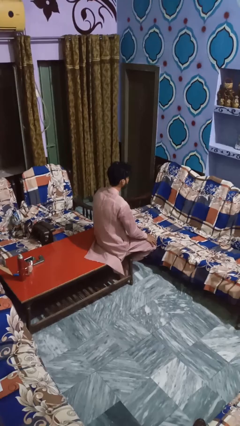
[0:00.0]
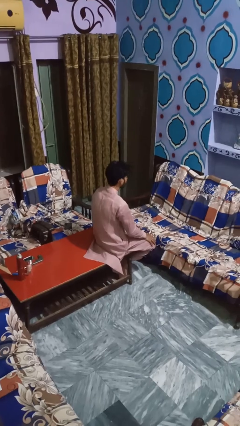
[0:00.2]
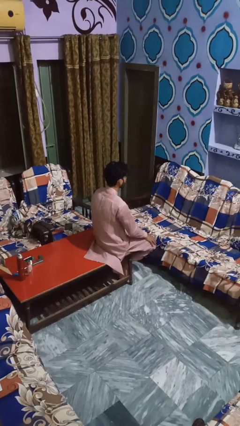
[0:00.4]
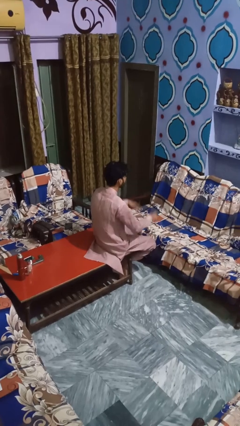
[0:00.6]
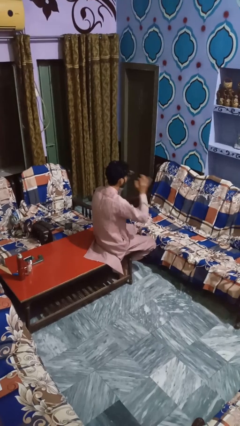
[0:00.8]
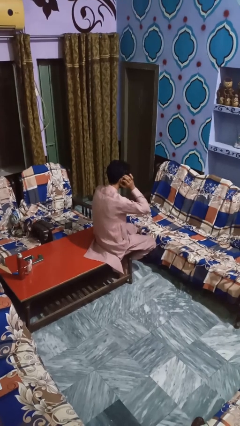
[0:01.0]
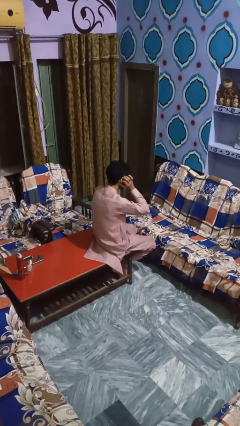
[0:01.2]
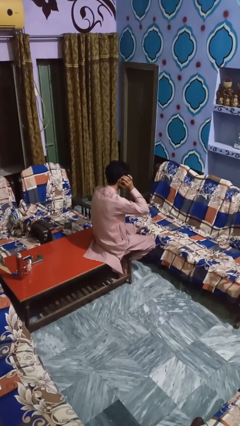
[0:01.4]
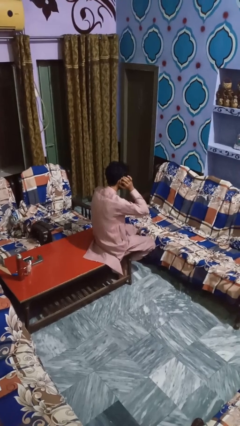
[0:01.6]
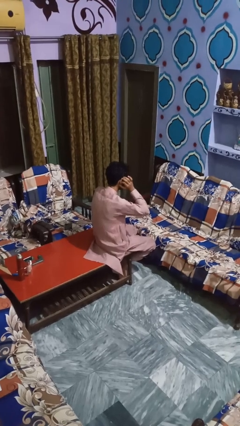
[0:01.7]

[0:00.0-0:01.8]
person puts fingers in ear

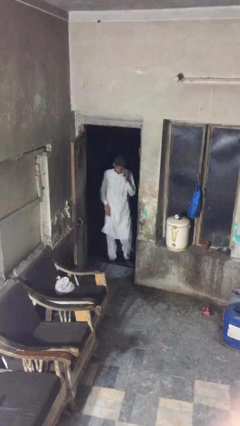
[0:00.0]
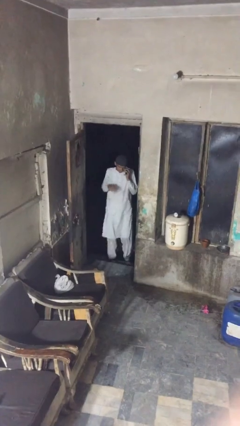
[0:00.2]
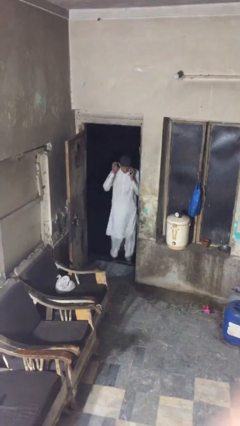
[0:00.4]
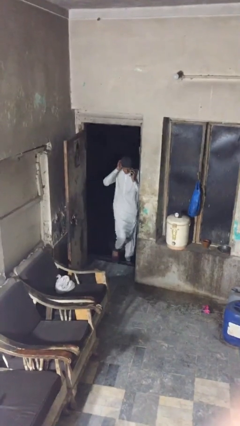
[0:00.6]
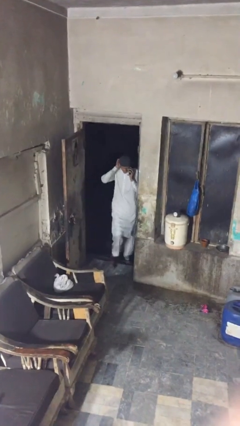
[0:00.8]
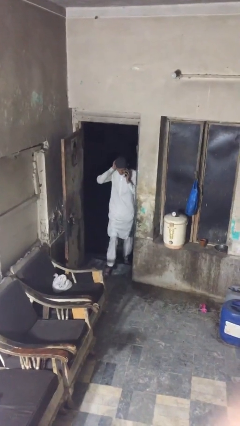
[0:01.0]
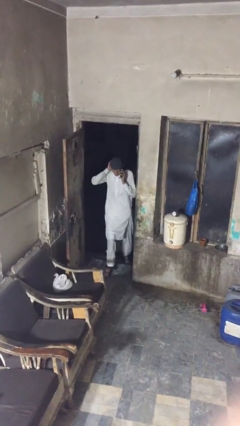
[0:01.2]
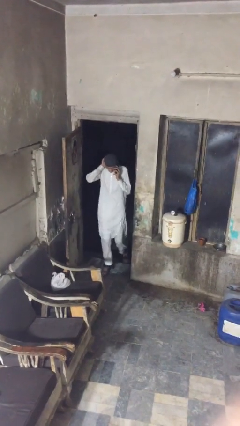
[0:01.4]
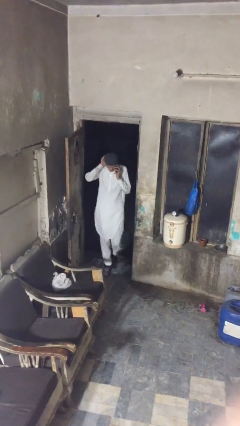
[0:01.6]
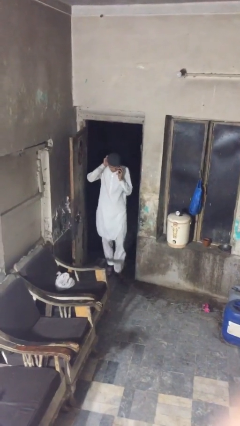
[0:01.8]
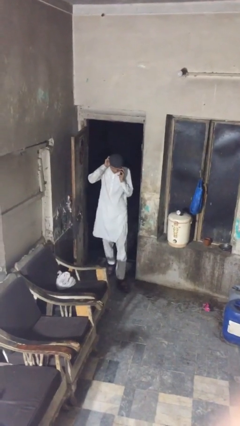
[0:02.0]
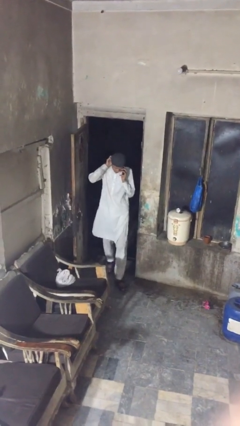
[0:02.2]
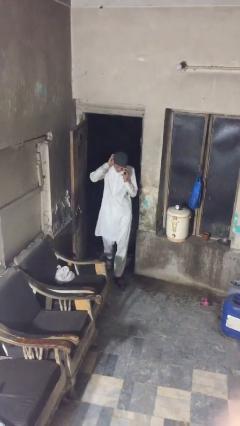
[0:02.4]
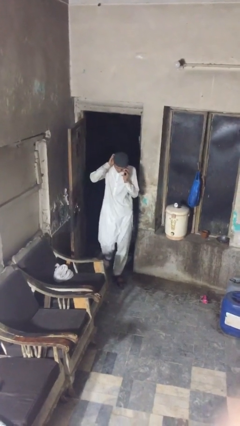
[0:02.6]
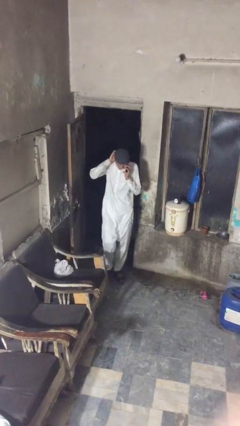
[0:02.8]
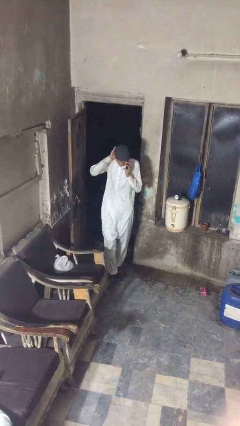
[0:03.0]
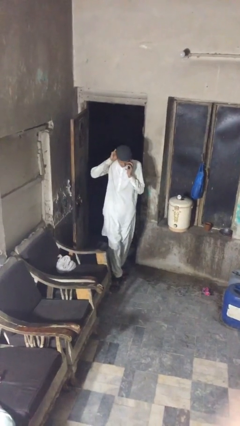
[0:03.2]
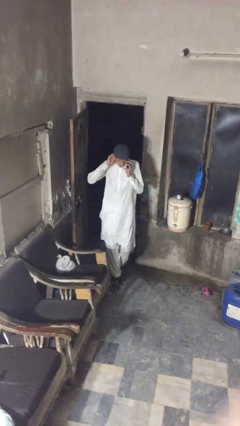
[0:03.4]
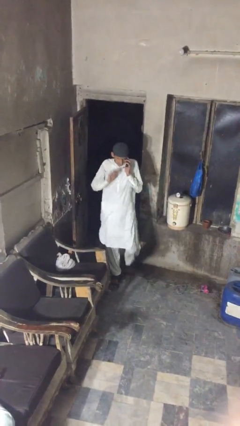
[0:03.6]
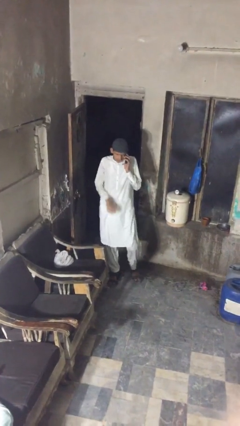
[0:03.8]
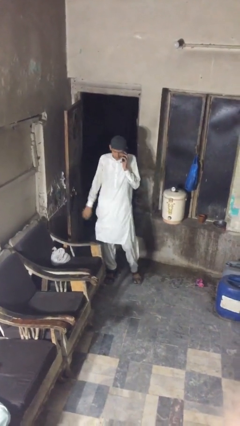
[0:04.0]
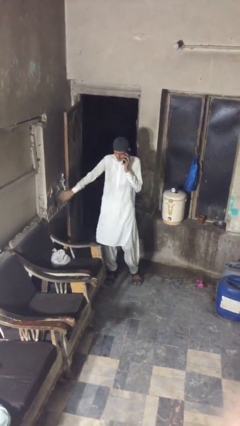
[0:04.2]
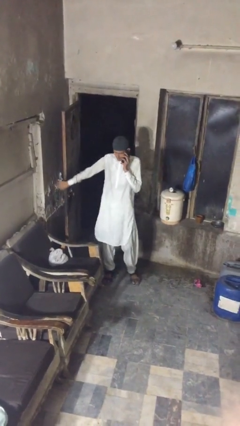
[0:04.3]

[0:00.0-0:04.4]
person enters scene through structure

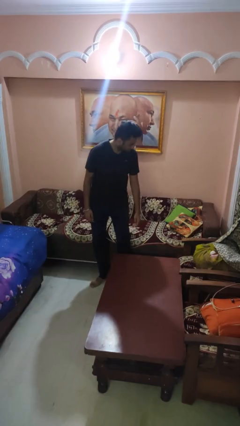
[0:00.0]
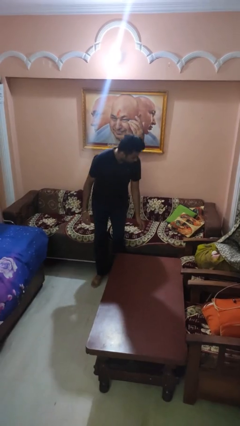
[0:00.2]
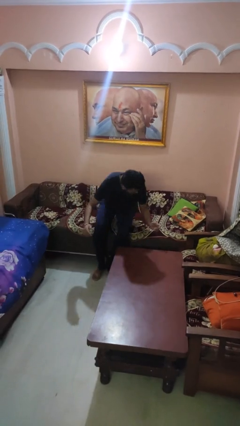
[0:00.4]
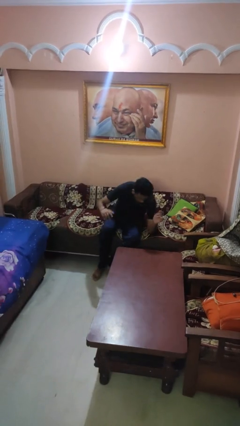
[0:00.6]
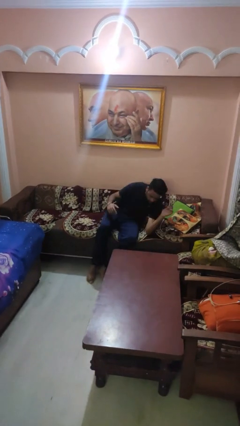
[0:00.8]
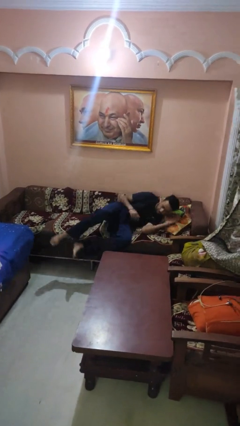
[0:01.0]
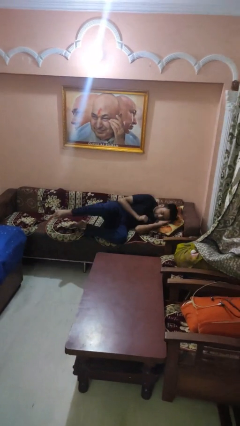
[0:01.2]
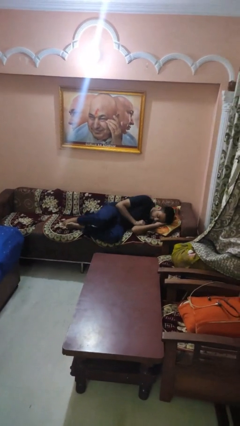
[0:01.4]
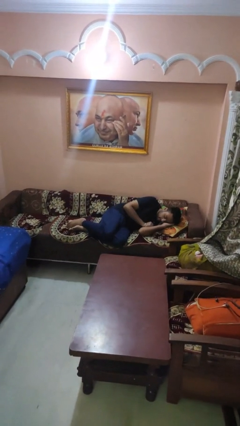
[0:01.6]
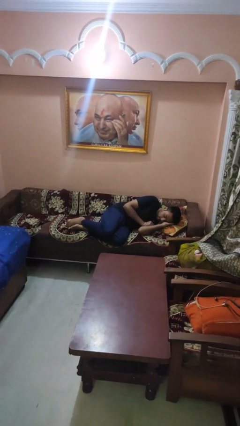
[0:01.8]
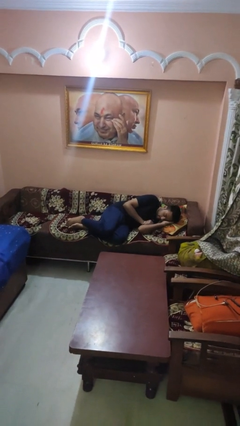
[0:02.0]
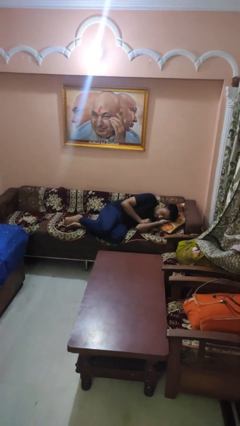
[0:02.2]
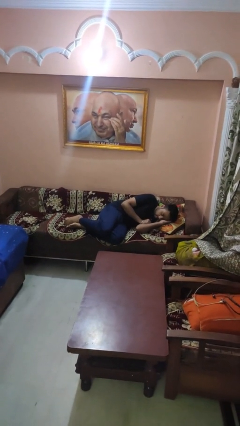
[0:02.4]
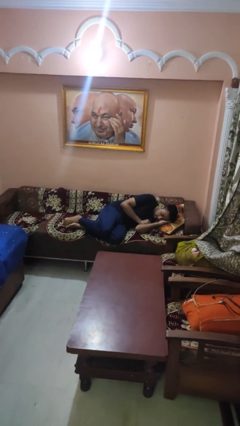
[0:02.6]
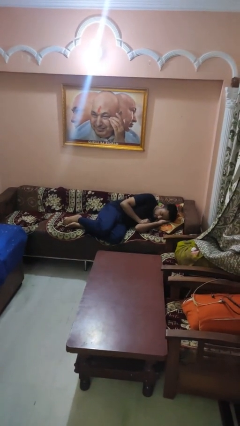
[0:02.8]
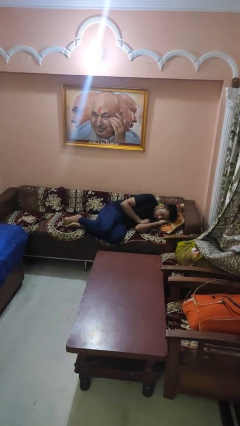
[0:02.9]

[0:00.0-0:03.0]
person lies down on couch

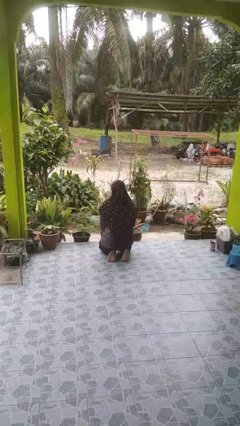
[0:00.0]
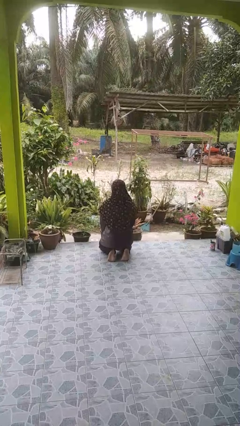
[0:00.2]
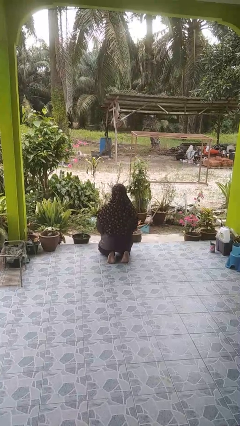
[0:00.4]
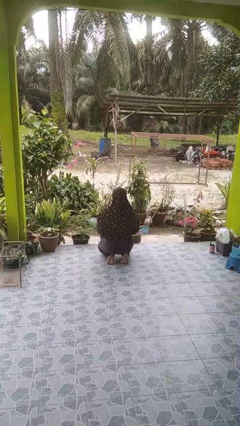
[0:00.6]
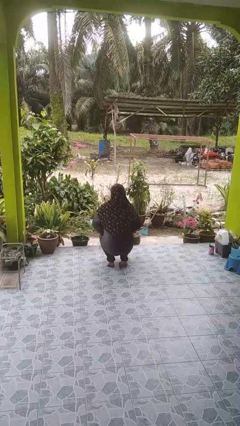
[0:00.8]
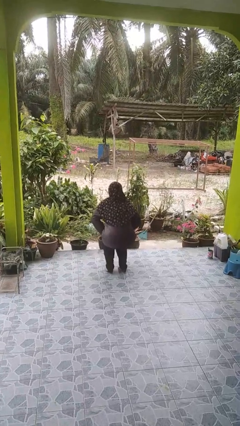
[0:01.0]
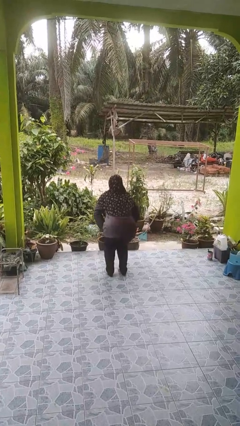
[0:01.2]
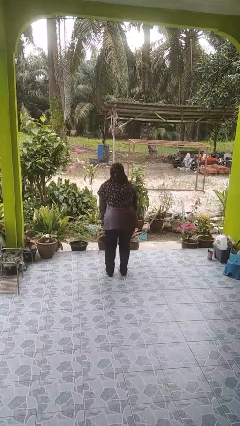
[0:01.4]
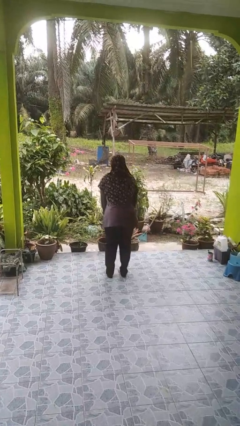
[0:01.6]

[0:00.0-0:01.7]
person stands up from floor

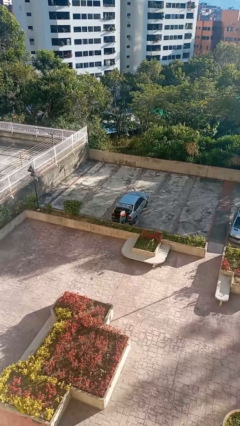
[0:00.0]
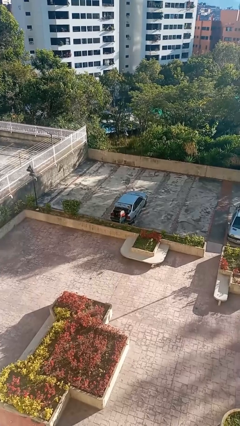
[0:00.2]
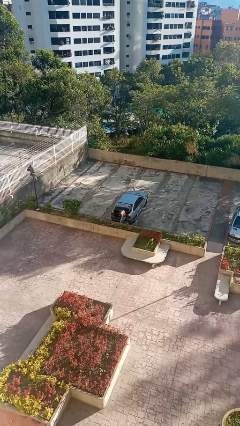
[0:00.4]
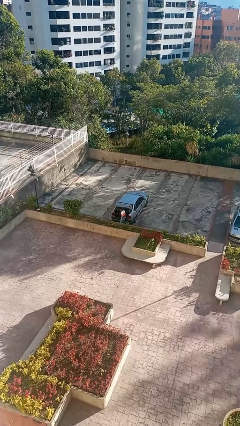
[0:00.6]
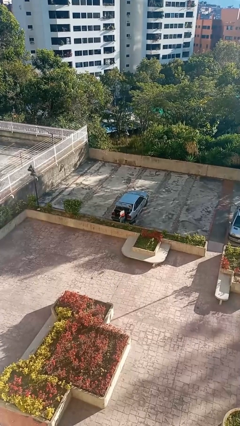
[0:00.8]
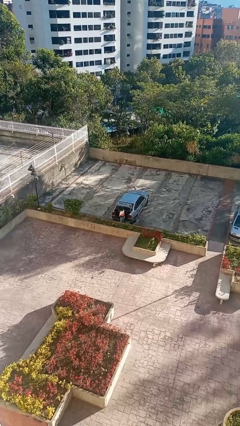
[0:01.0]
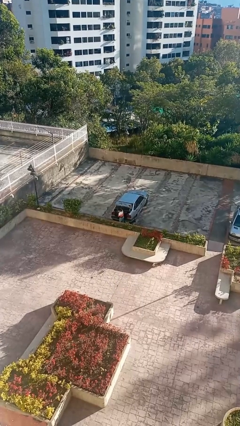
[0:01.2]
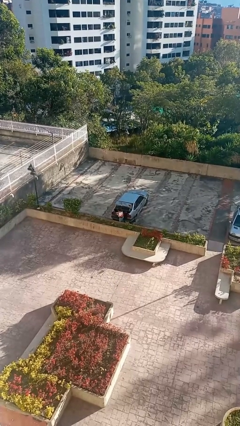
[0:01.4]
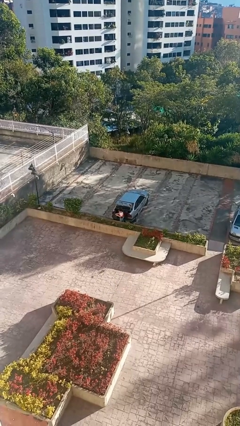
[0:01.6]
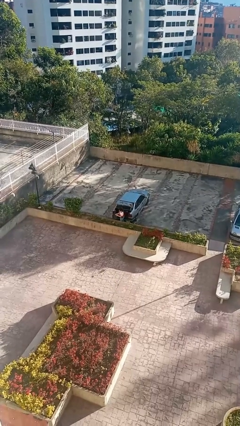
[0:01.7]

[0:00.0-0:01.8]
person unloads car

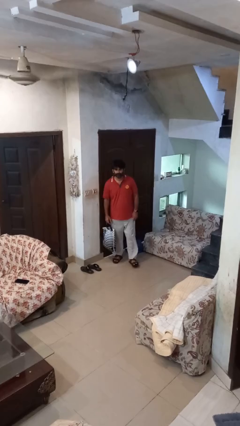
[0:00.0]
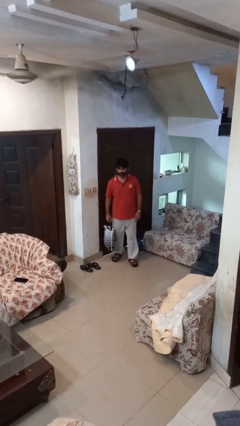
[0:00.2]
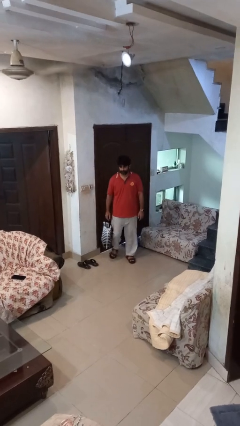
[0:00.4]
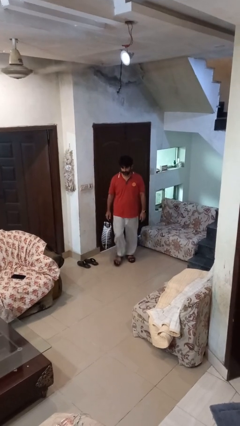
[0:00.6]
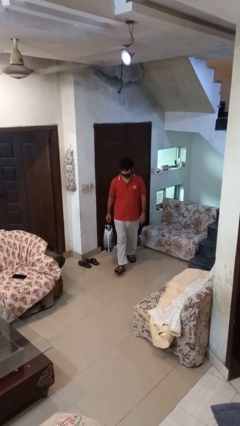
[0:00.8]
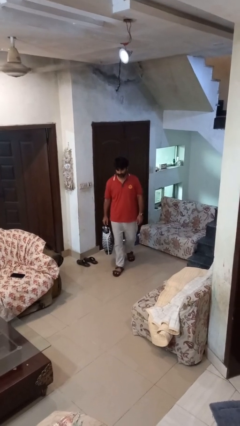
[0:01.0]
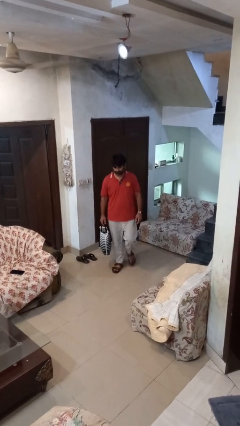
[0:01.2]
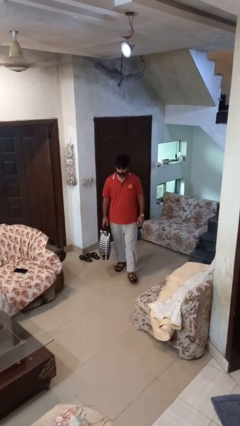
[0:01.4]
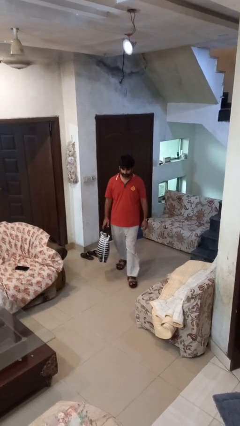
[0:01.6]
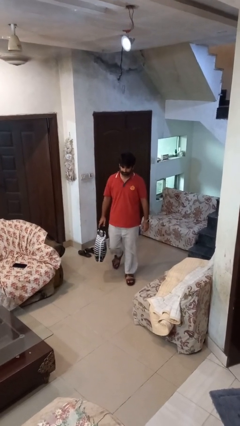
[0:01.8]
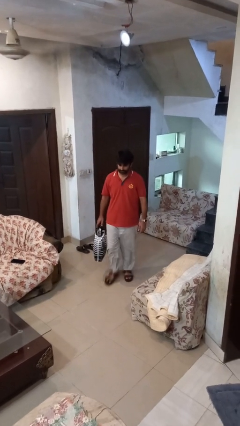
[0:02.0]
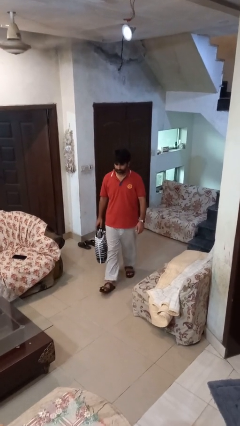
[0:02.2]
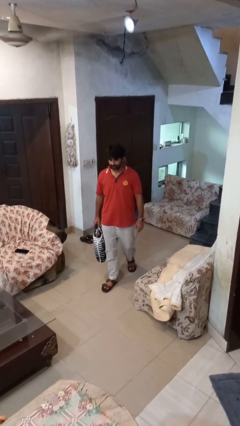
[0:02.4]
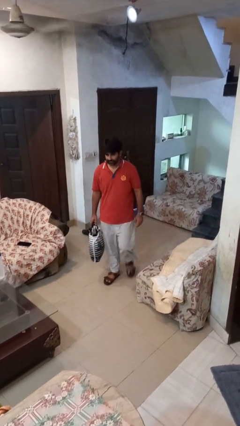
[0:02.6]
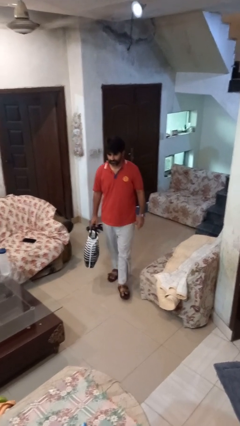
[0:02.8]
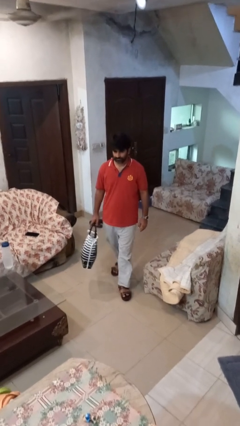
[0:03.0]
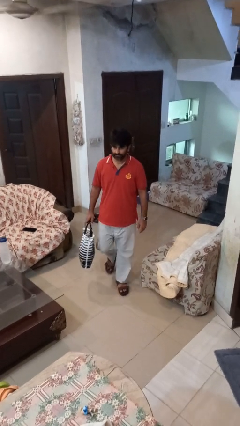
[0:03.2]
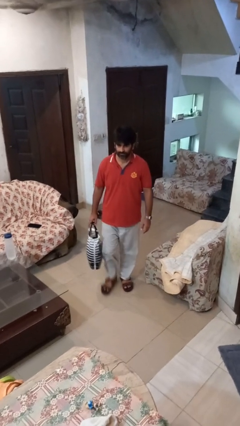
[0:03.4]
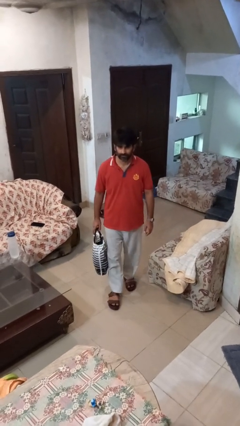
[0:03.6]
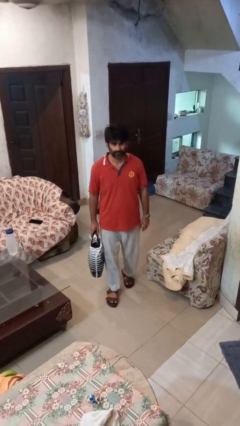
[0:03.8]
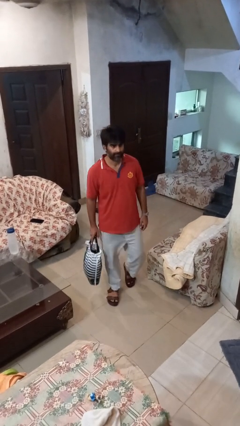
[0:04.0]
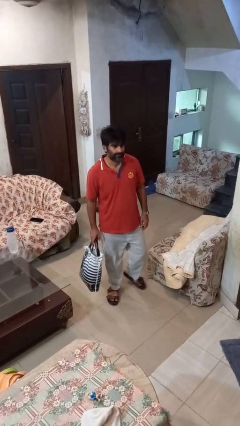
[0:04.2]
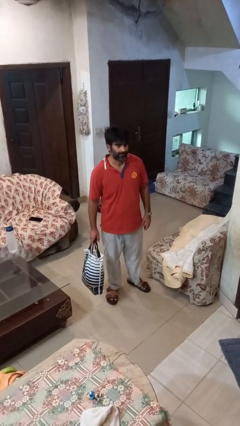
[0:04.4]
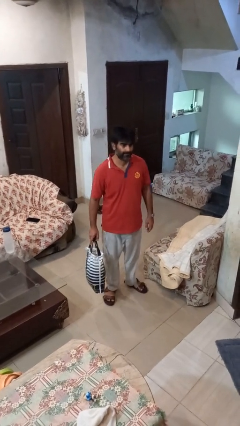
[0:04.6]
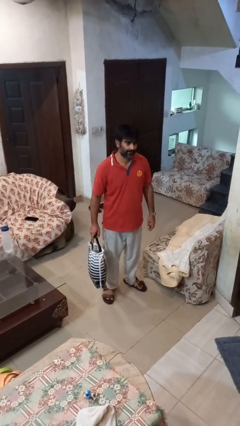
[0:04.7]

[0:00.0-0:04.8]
person carries groceries
